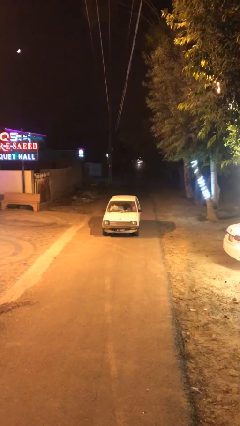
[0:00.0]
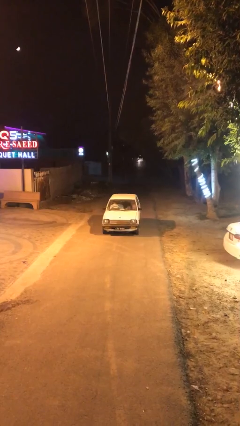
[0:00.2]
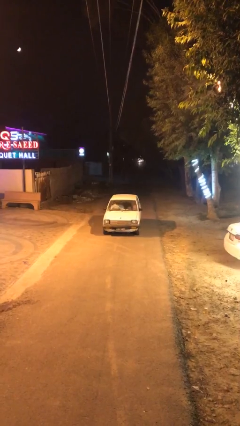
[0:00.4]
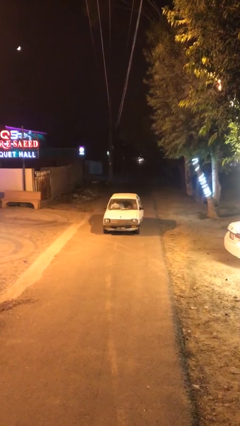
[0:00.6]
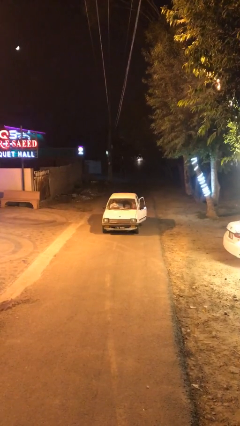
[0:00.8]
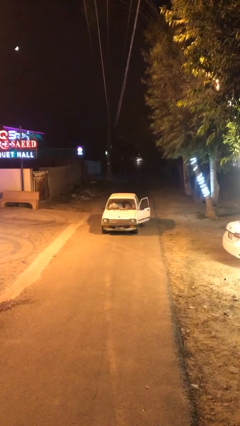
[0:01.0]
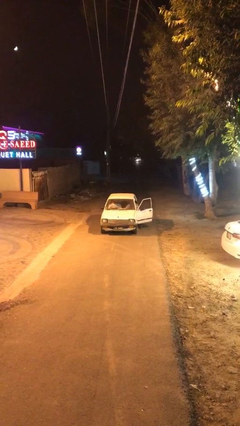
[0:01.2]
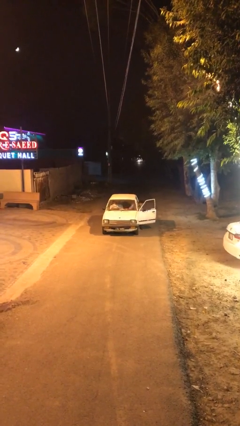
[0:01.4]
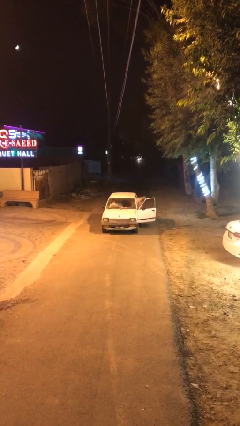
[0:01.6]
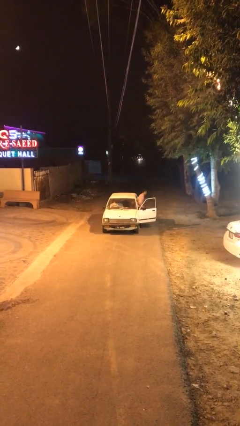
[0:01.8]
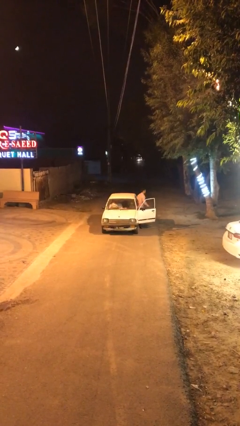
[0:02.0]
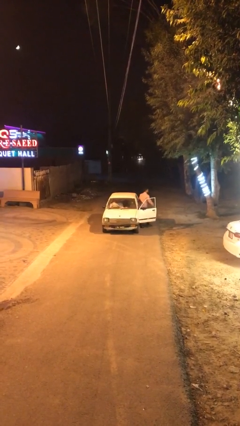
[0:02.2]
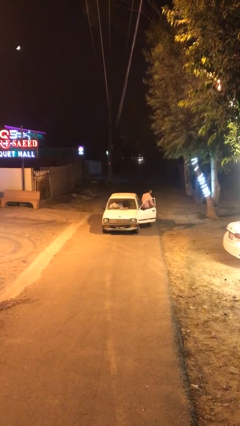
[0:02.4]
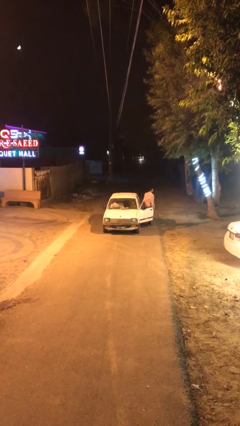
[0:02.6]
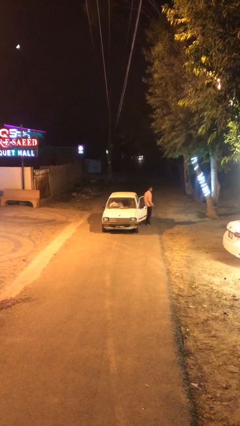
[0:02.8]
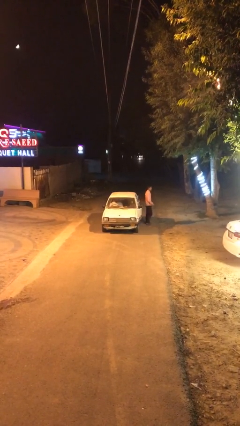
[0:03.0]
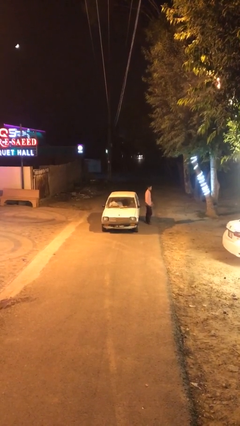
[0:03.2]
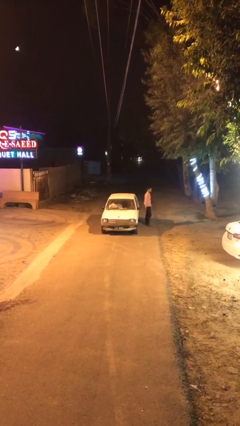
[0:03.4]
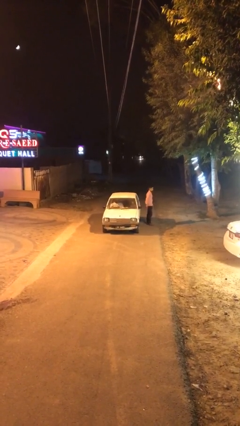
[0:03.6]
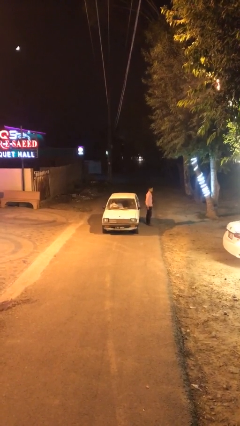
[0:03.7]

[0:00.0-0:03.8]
car drops off person

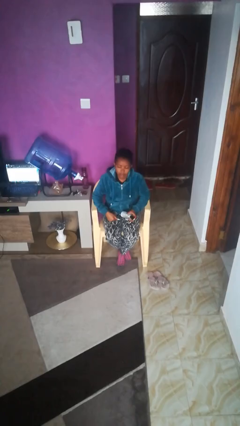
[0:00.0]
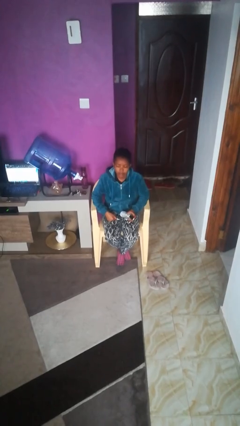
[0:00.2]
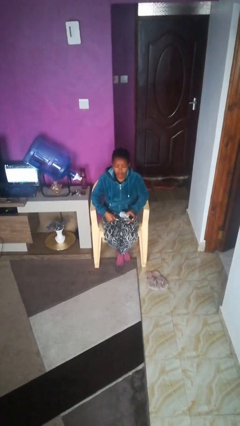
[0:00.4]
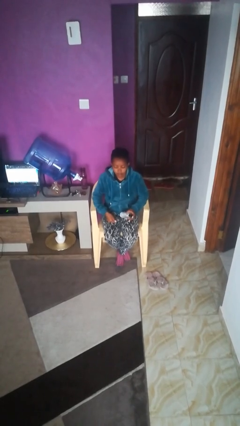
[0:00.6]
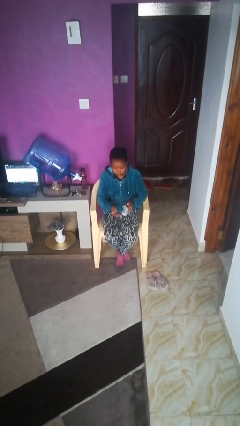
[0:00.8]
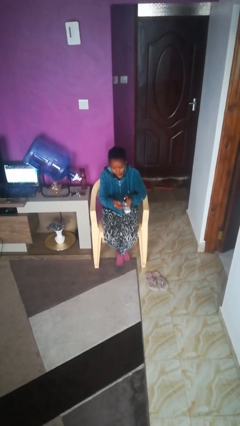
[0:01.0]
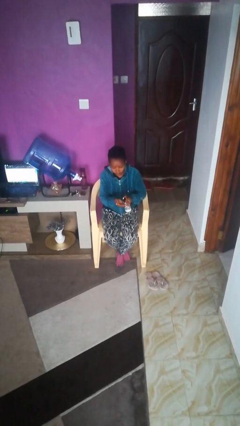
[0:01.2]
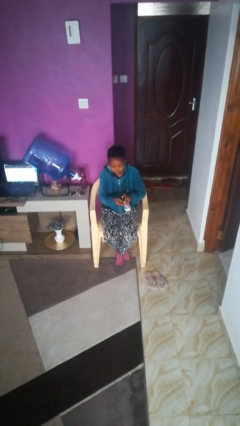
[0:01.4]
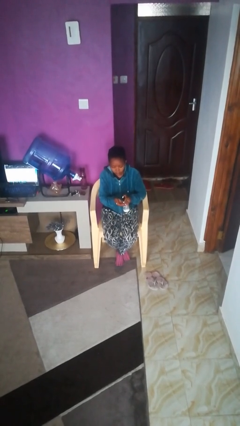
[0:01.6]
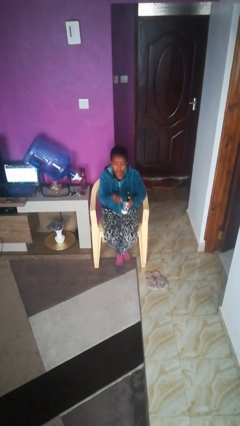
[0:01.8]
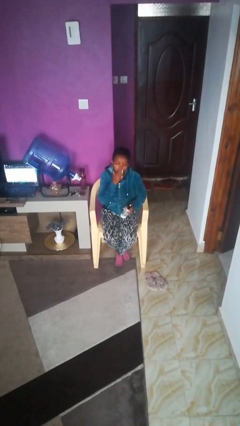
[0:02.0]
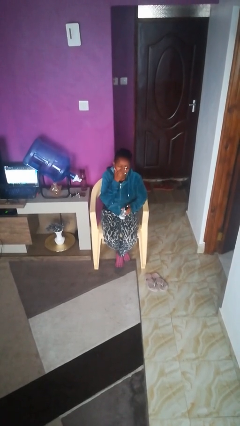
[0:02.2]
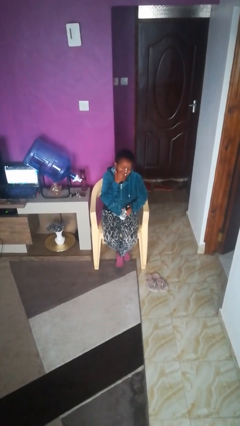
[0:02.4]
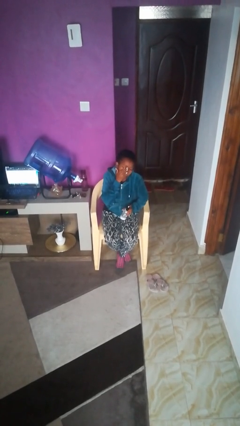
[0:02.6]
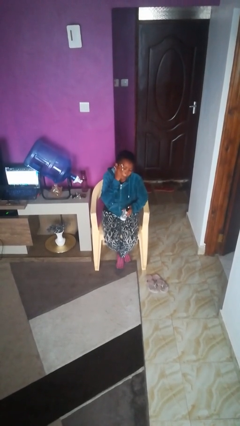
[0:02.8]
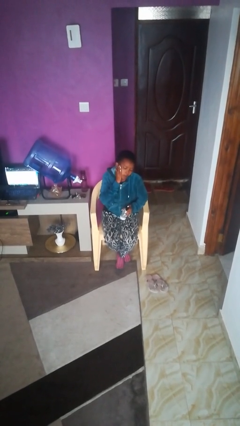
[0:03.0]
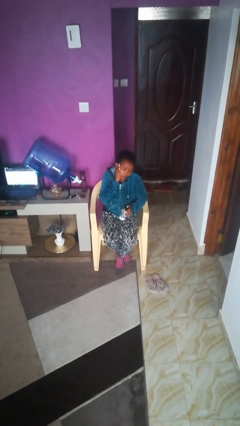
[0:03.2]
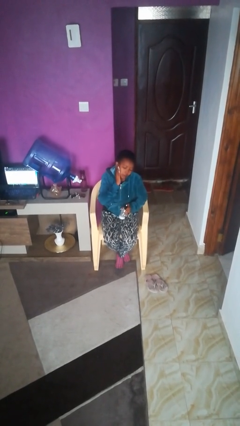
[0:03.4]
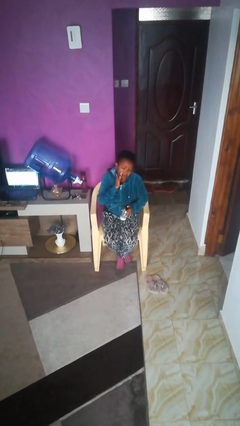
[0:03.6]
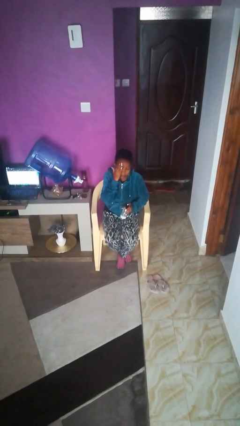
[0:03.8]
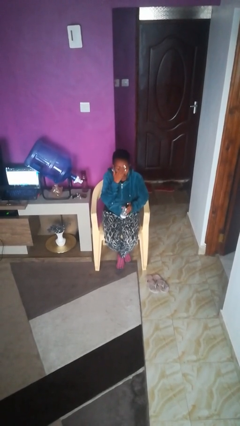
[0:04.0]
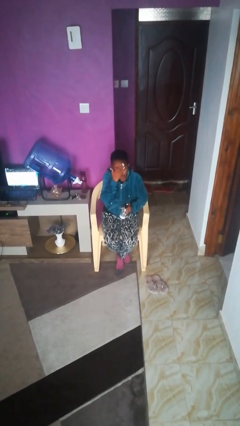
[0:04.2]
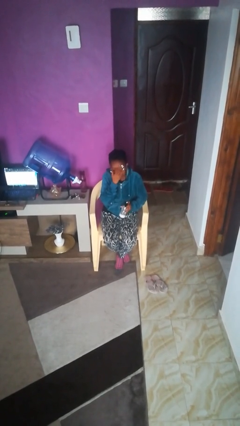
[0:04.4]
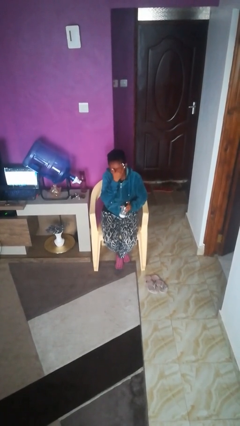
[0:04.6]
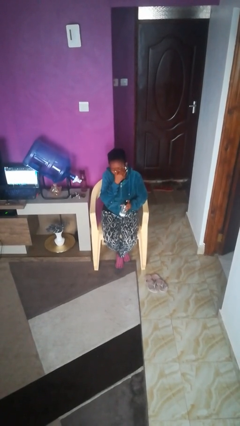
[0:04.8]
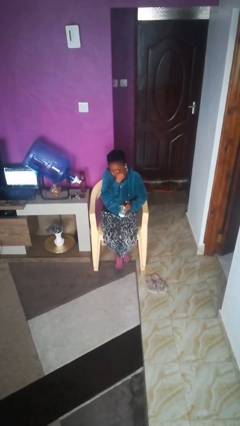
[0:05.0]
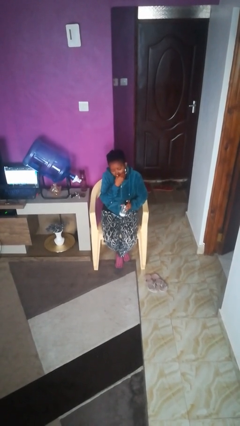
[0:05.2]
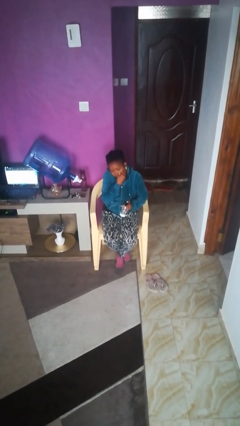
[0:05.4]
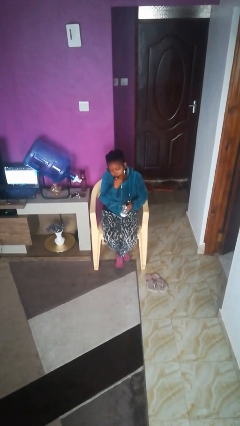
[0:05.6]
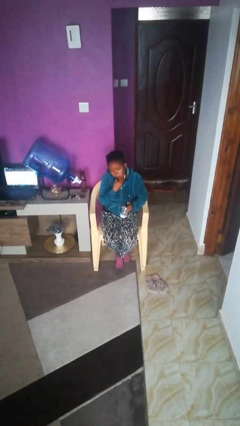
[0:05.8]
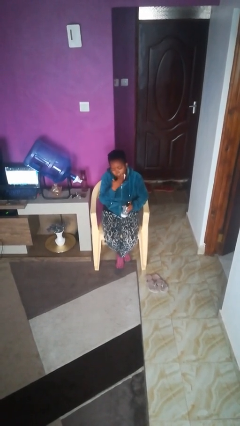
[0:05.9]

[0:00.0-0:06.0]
person applies facial moisturizer

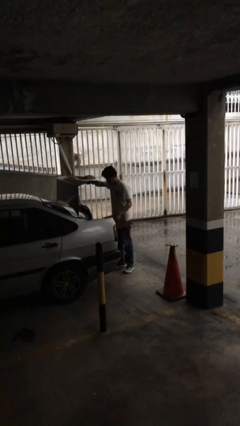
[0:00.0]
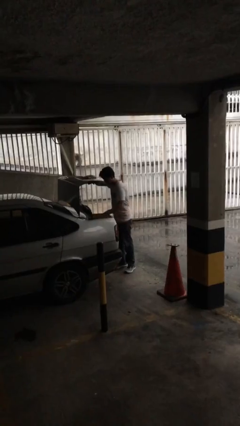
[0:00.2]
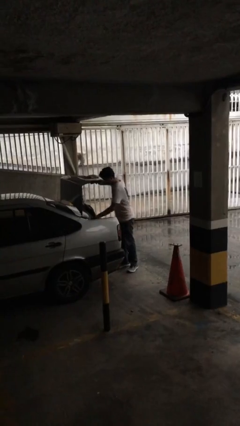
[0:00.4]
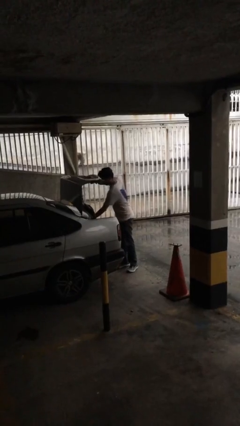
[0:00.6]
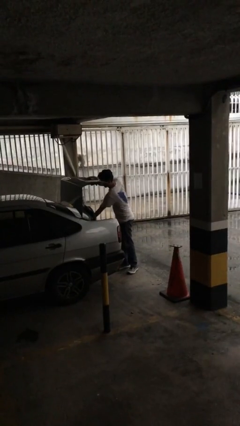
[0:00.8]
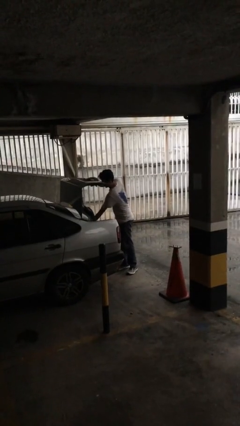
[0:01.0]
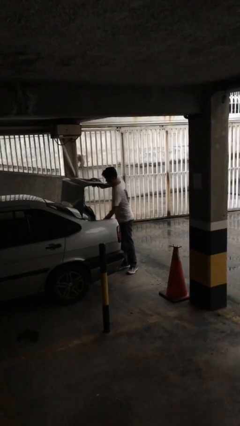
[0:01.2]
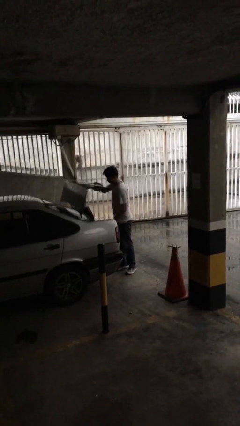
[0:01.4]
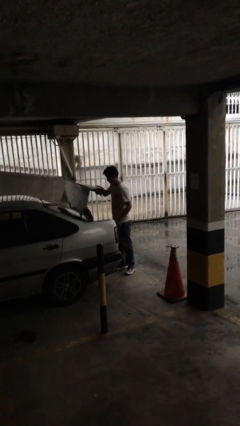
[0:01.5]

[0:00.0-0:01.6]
person loads car

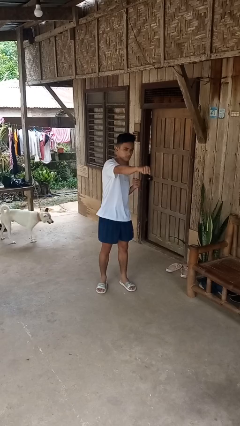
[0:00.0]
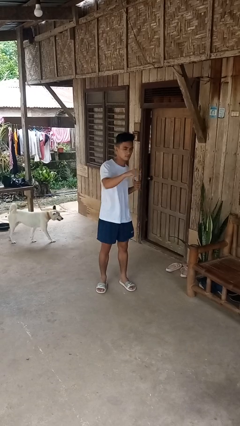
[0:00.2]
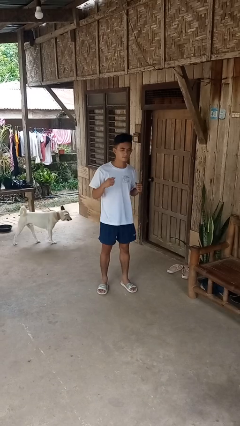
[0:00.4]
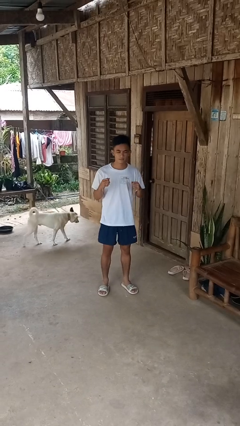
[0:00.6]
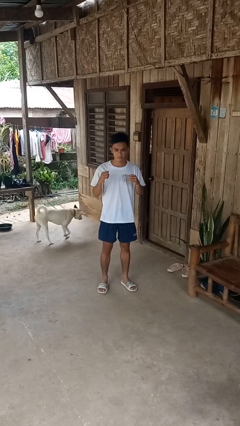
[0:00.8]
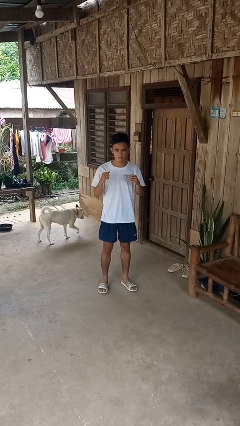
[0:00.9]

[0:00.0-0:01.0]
person punches

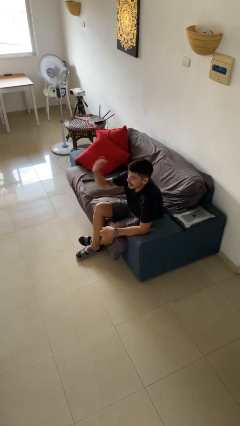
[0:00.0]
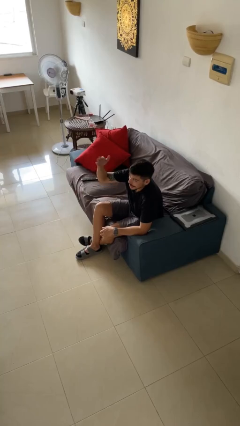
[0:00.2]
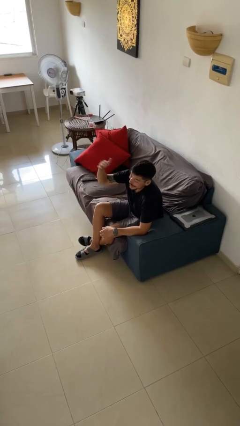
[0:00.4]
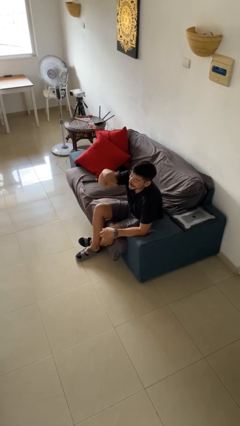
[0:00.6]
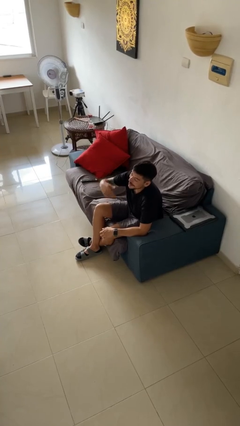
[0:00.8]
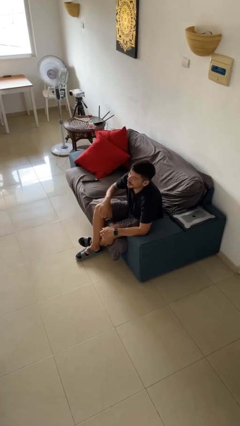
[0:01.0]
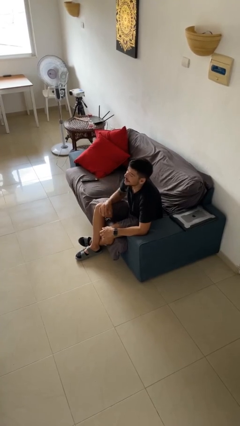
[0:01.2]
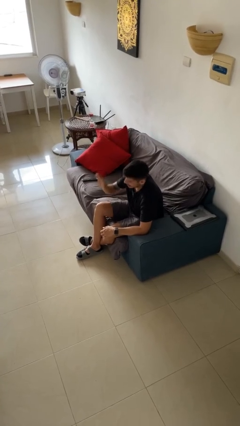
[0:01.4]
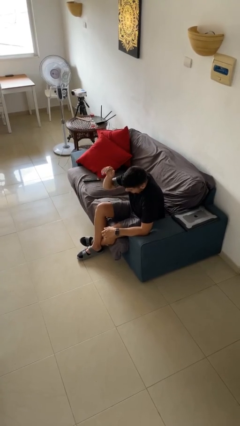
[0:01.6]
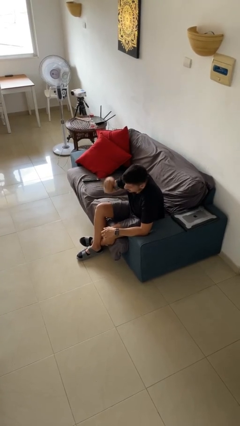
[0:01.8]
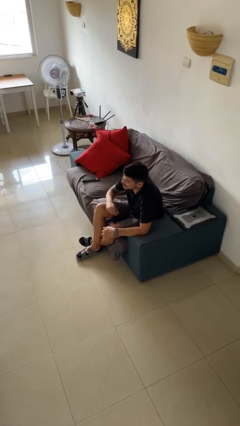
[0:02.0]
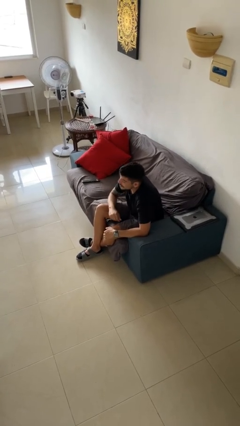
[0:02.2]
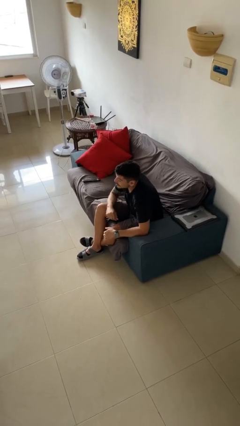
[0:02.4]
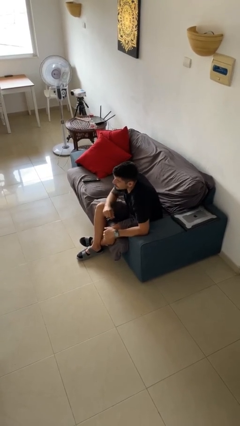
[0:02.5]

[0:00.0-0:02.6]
person gestures come here

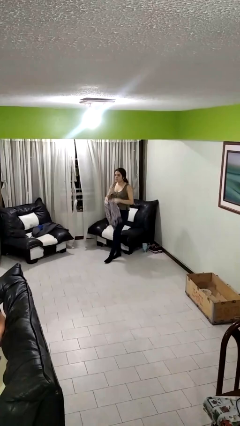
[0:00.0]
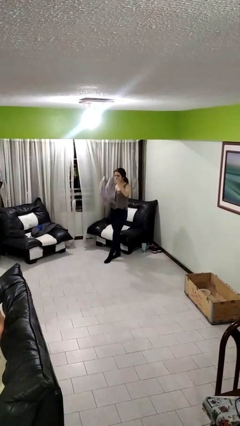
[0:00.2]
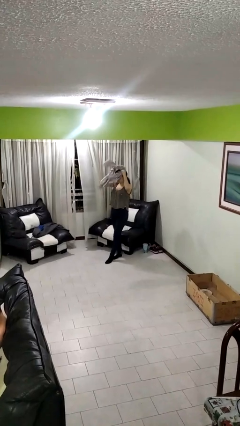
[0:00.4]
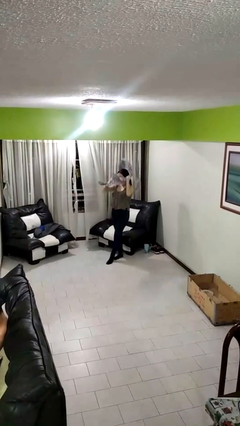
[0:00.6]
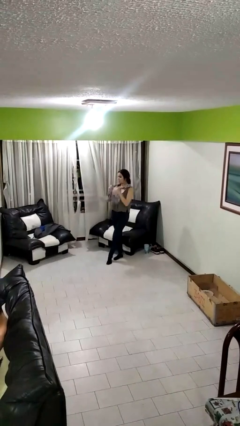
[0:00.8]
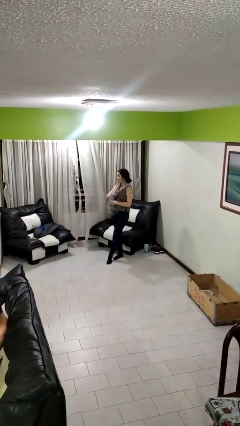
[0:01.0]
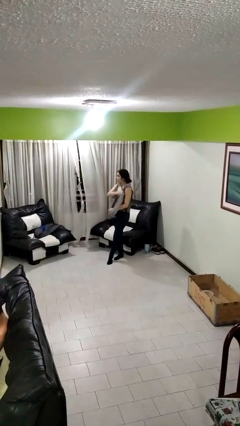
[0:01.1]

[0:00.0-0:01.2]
person puts on scarf

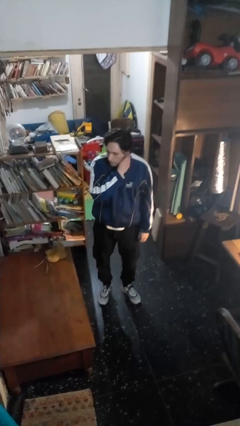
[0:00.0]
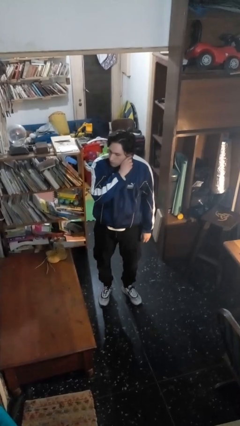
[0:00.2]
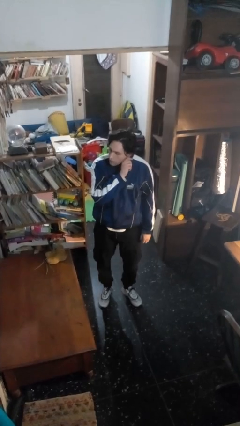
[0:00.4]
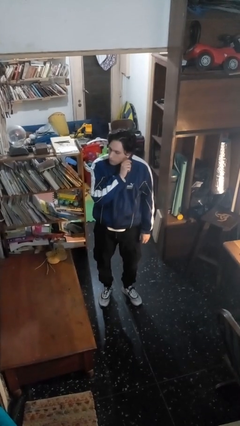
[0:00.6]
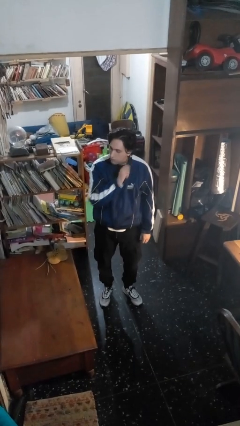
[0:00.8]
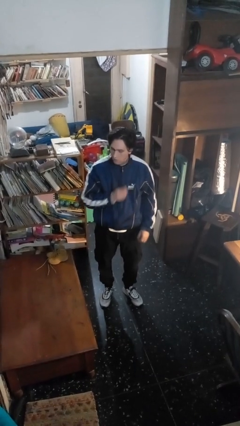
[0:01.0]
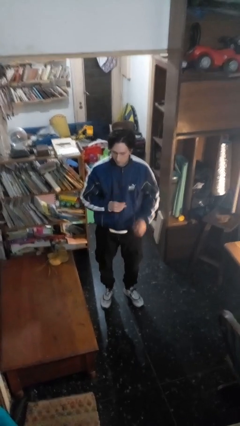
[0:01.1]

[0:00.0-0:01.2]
person takes off earrings
